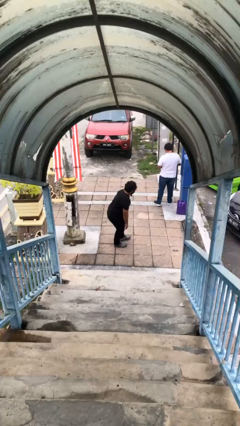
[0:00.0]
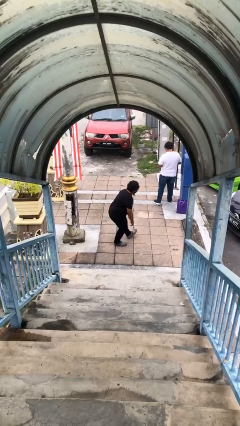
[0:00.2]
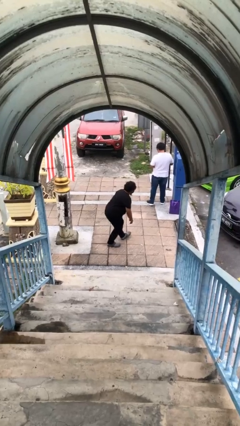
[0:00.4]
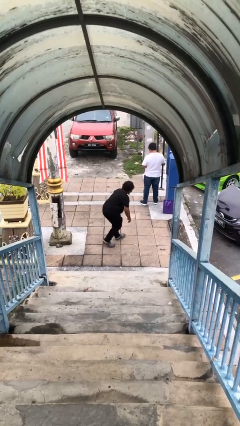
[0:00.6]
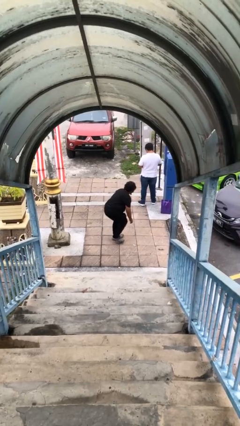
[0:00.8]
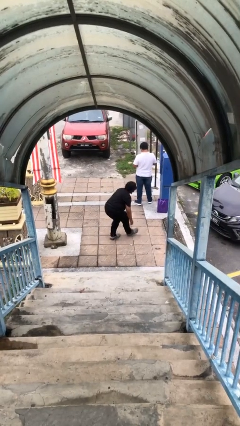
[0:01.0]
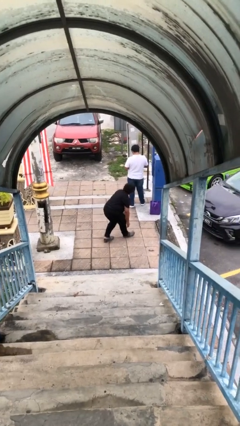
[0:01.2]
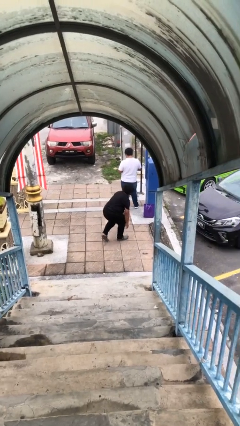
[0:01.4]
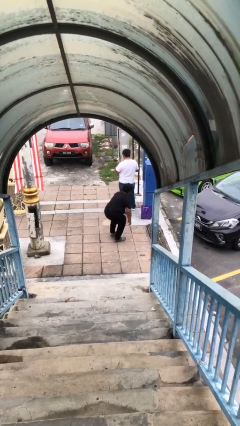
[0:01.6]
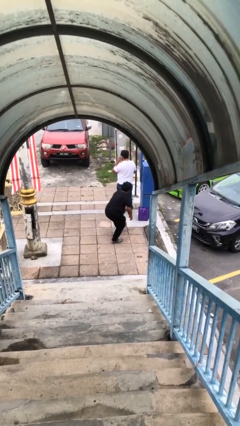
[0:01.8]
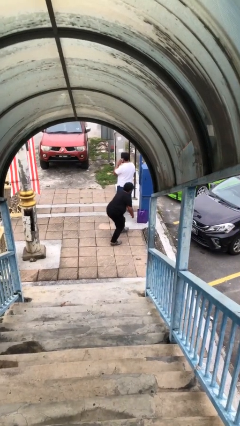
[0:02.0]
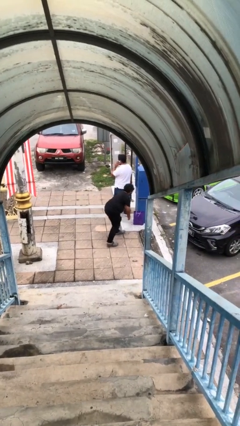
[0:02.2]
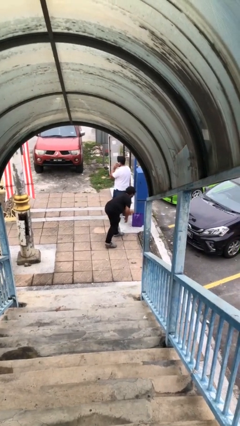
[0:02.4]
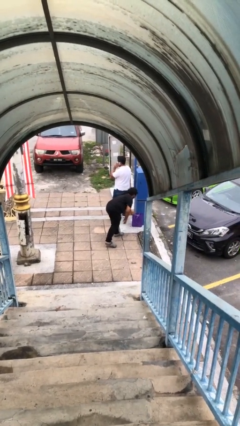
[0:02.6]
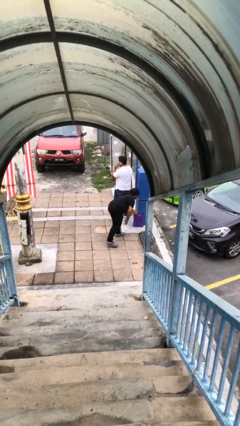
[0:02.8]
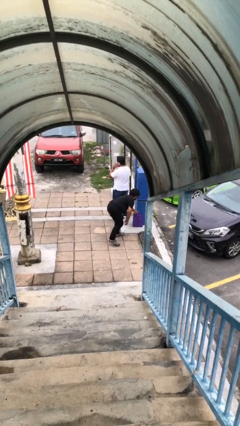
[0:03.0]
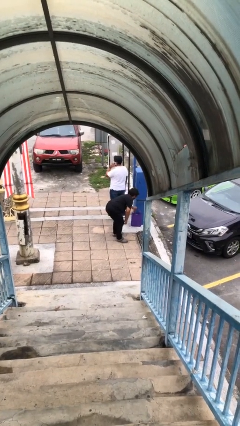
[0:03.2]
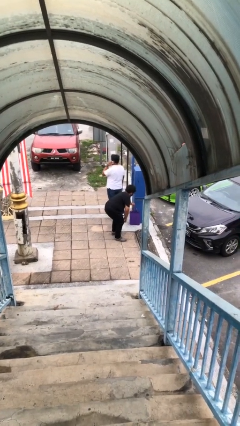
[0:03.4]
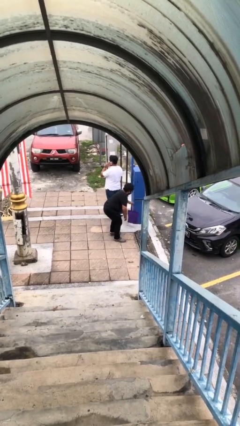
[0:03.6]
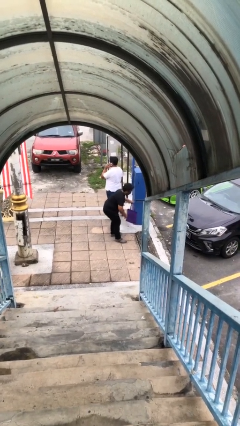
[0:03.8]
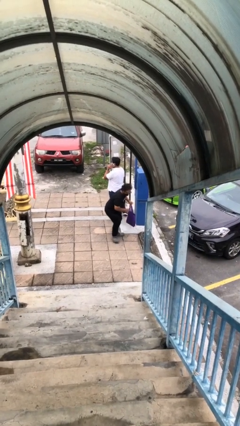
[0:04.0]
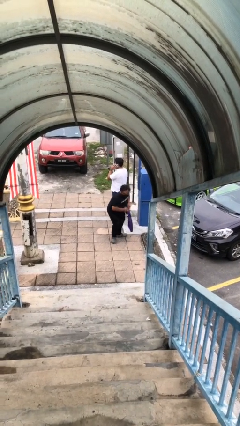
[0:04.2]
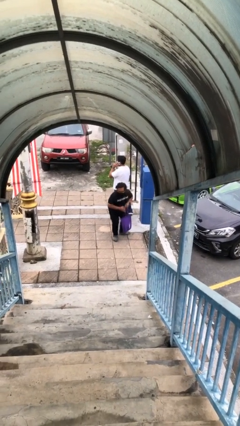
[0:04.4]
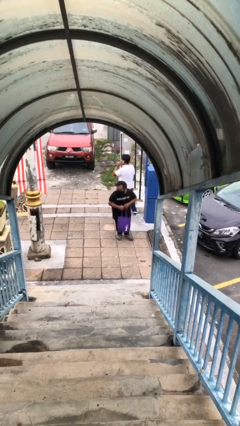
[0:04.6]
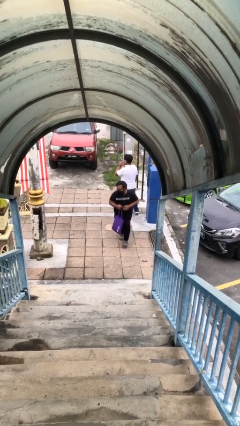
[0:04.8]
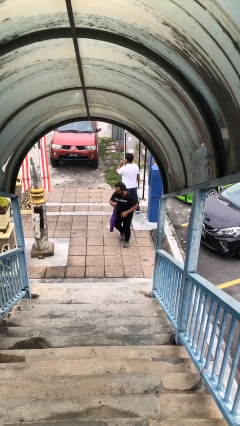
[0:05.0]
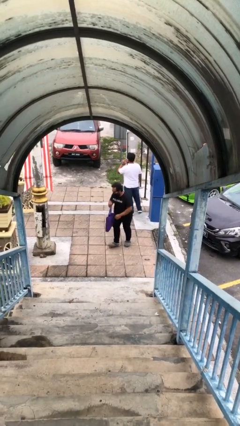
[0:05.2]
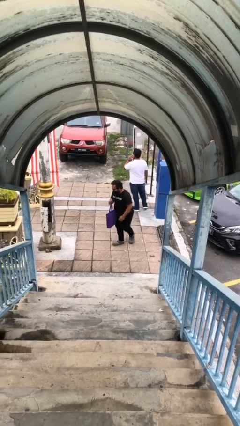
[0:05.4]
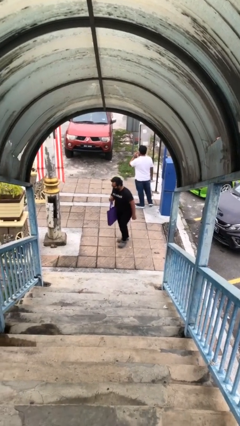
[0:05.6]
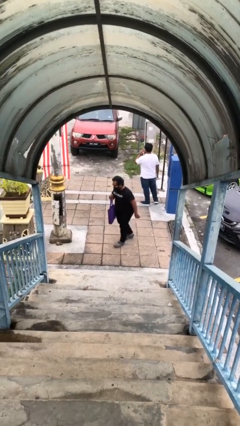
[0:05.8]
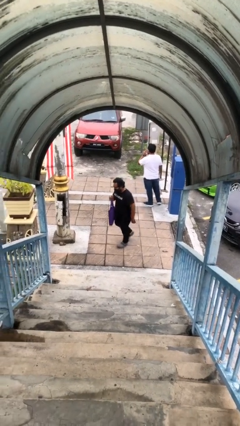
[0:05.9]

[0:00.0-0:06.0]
person steals object from person

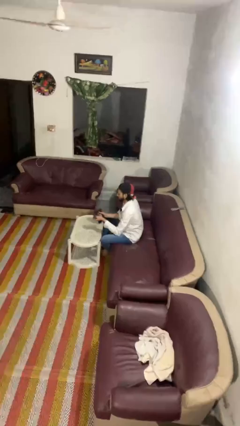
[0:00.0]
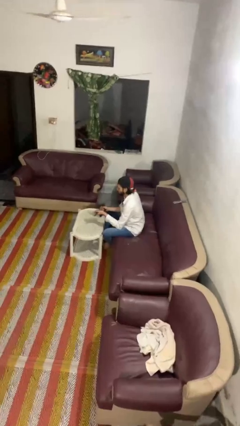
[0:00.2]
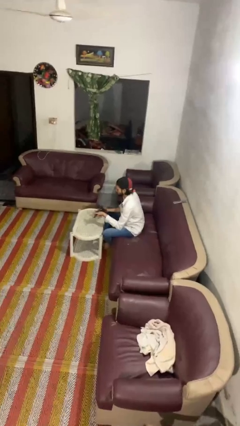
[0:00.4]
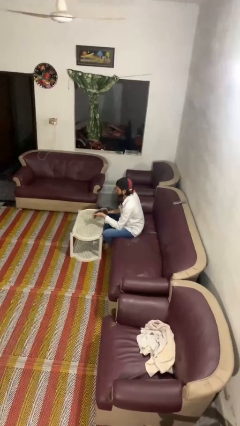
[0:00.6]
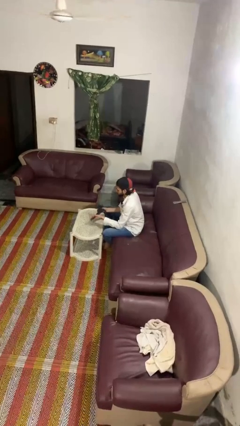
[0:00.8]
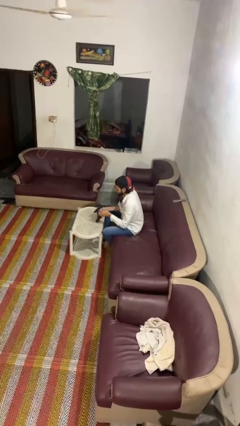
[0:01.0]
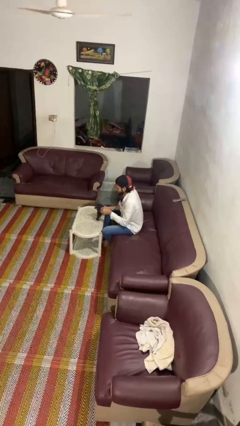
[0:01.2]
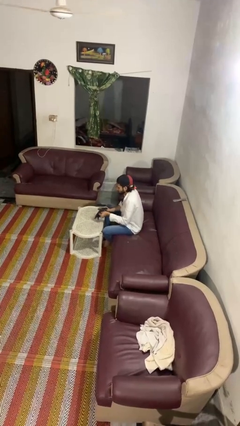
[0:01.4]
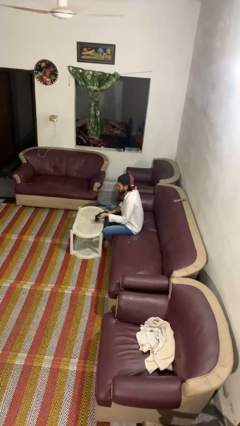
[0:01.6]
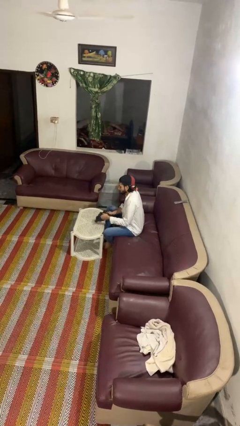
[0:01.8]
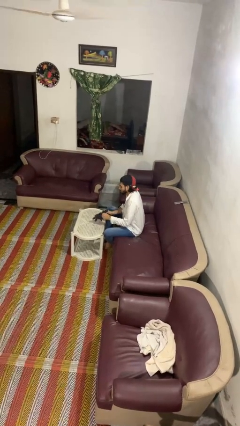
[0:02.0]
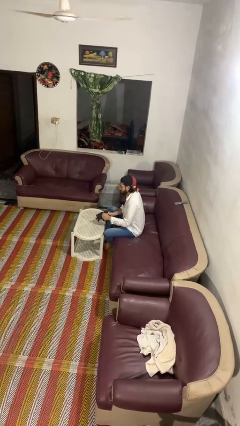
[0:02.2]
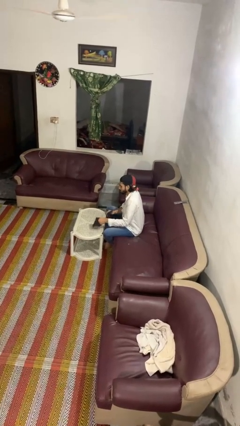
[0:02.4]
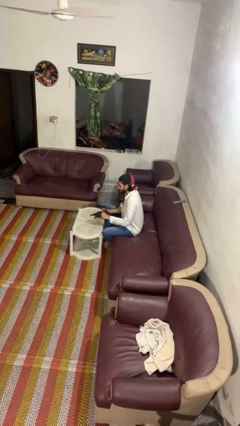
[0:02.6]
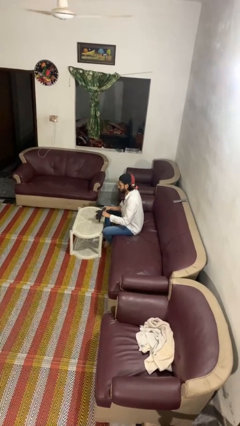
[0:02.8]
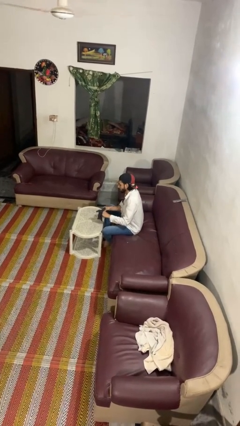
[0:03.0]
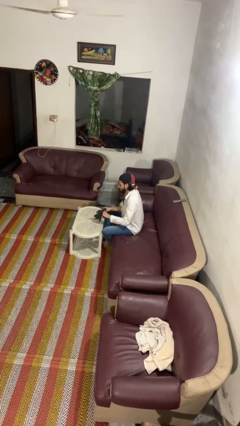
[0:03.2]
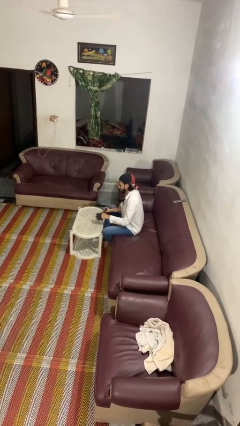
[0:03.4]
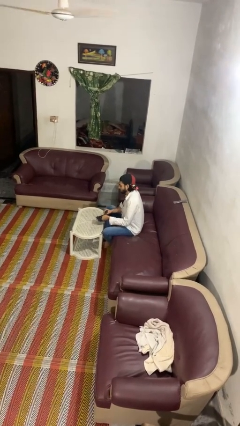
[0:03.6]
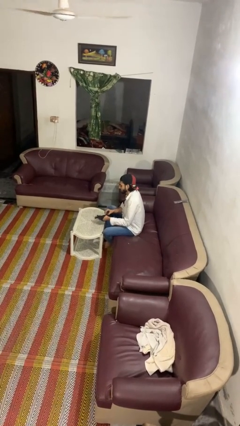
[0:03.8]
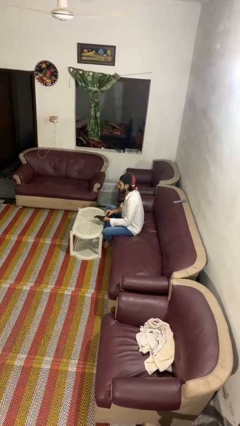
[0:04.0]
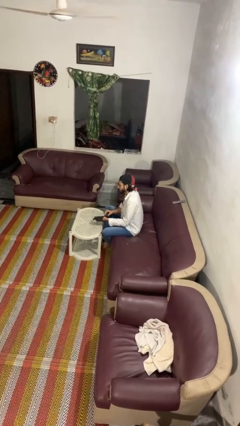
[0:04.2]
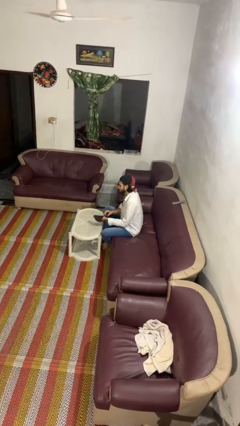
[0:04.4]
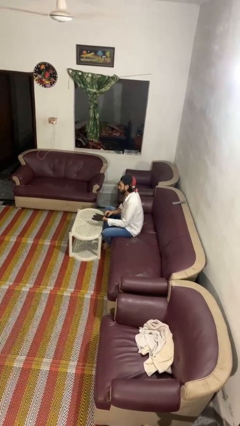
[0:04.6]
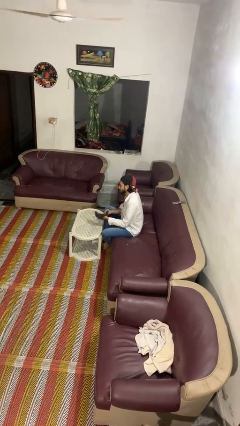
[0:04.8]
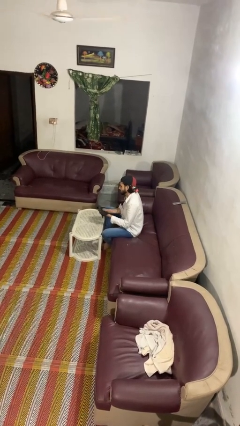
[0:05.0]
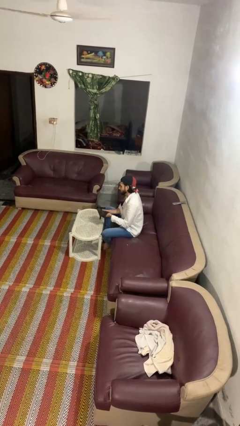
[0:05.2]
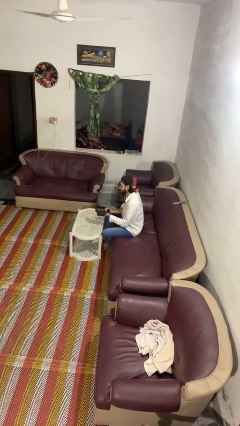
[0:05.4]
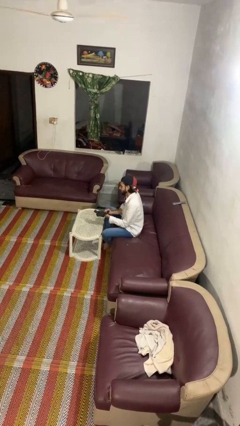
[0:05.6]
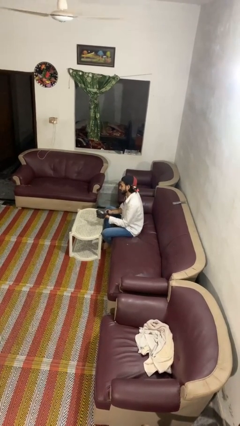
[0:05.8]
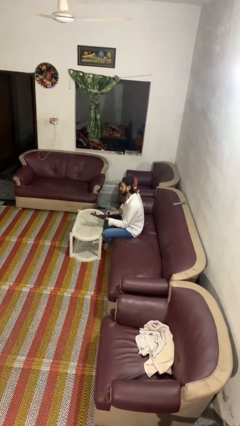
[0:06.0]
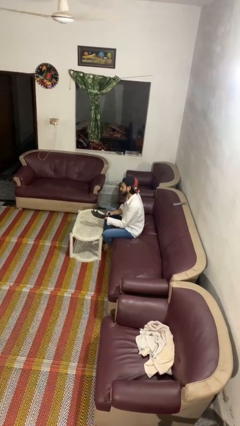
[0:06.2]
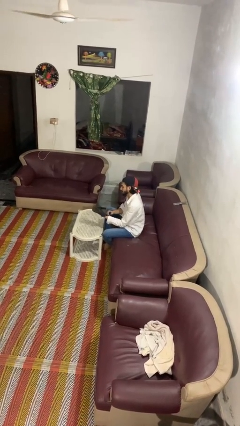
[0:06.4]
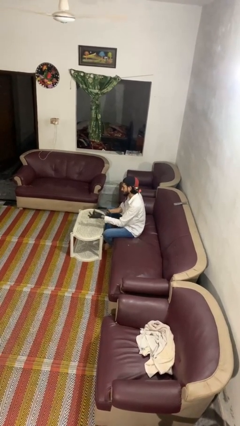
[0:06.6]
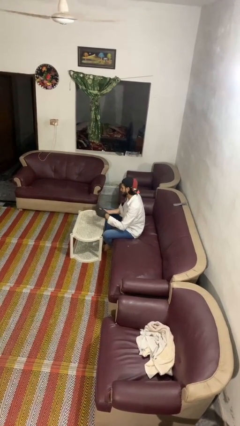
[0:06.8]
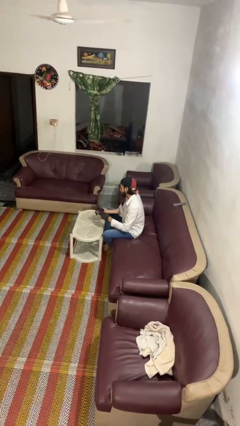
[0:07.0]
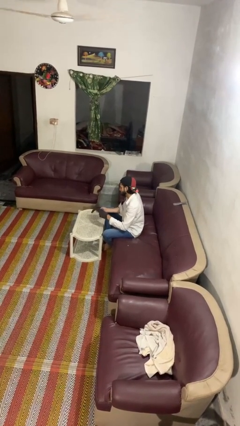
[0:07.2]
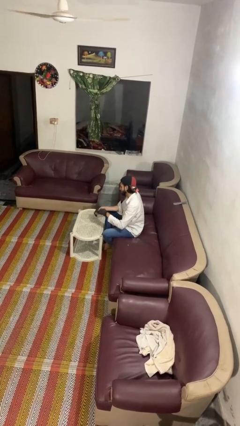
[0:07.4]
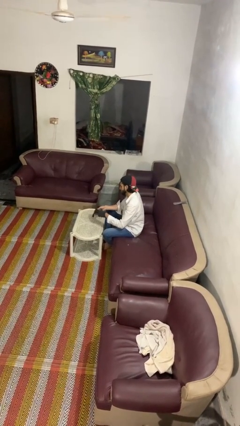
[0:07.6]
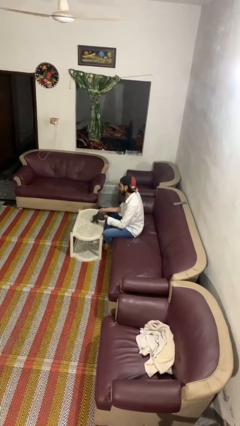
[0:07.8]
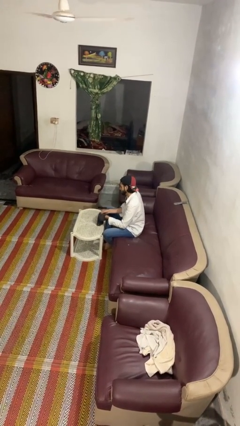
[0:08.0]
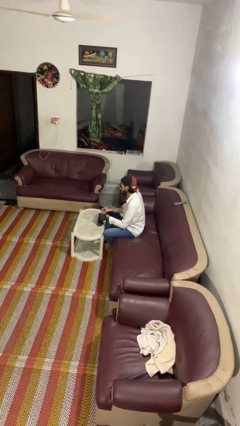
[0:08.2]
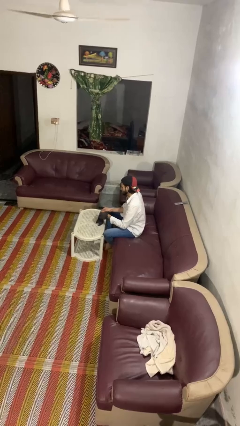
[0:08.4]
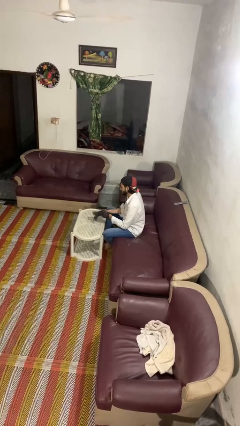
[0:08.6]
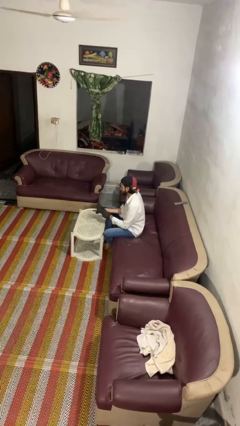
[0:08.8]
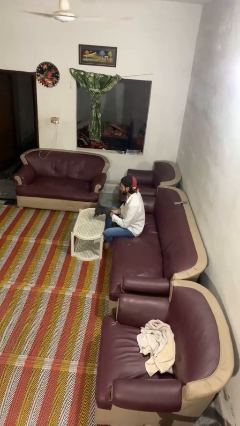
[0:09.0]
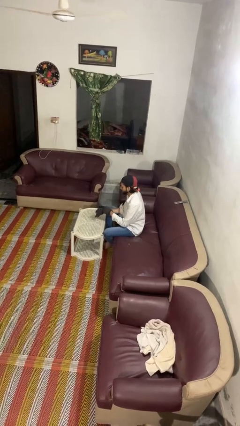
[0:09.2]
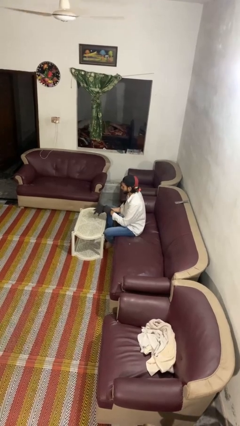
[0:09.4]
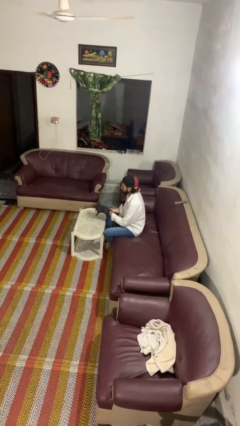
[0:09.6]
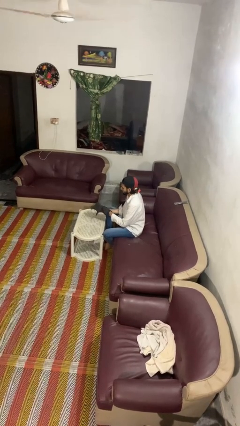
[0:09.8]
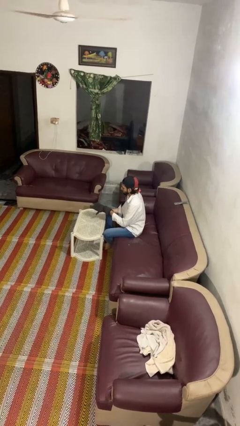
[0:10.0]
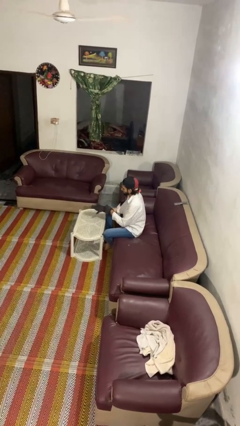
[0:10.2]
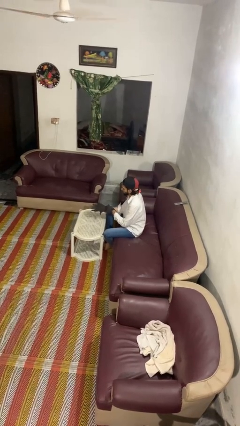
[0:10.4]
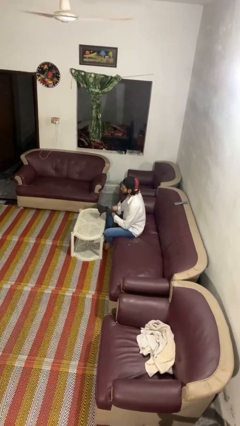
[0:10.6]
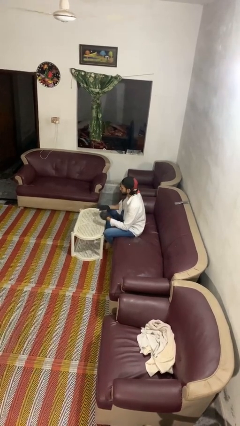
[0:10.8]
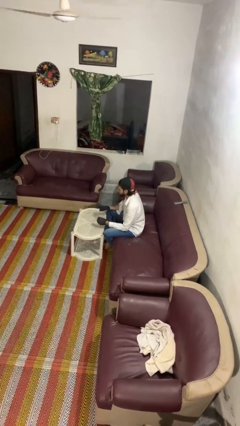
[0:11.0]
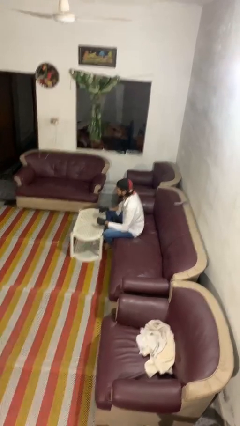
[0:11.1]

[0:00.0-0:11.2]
person puts on gloves

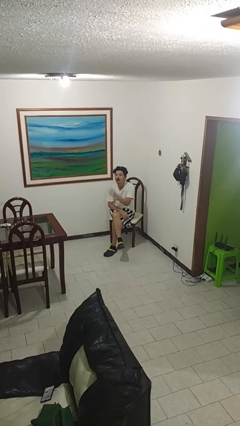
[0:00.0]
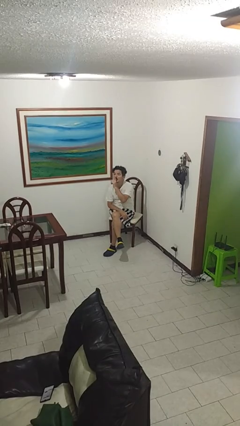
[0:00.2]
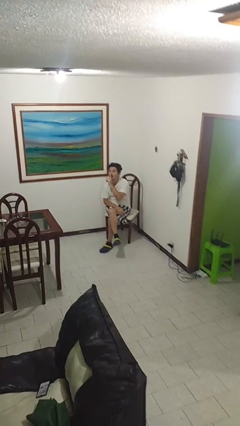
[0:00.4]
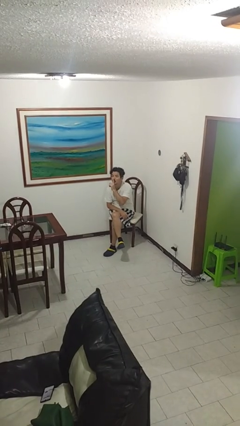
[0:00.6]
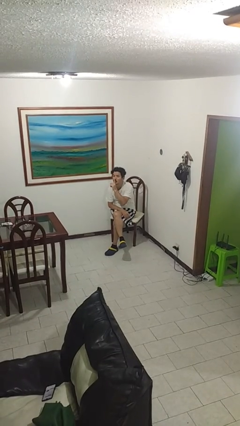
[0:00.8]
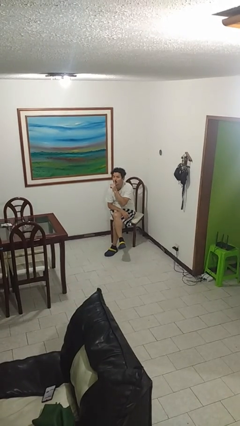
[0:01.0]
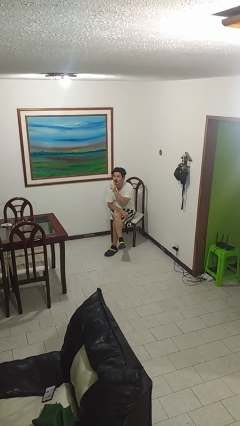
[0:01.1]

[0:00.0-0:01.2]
person gestures be quiet
